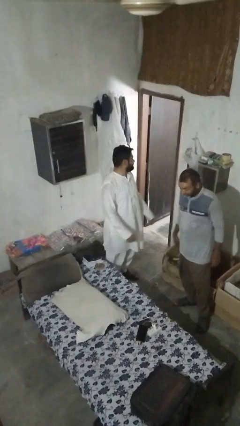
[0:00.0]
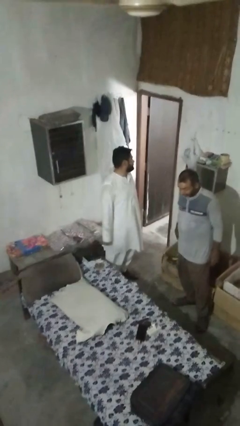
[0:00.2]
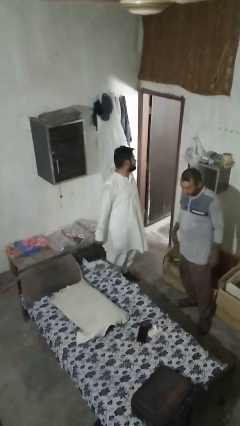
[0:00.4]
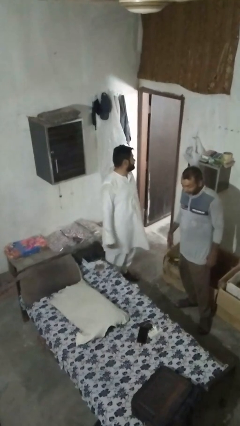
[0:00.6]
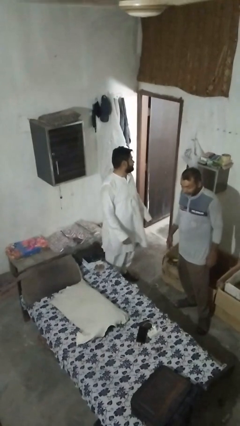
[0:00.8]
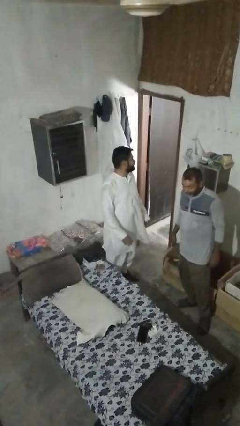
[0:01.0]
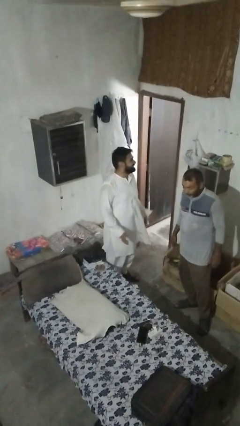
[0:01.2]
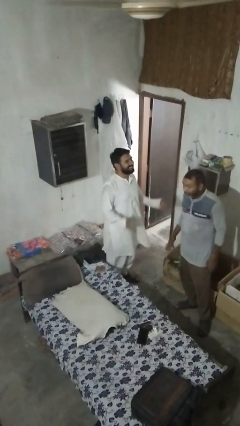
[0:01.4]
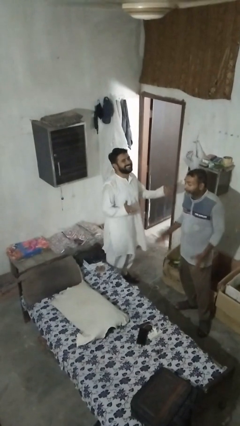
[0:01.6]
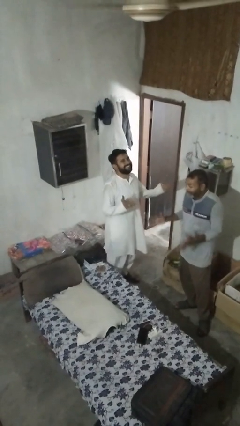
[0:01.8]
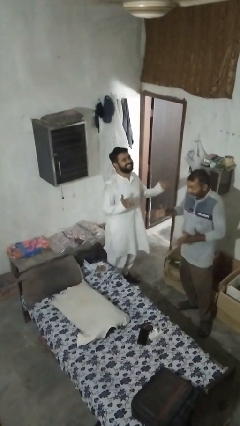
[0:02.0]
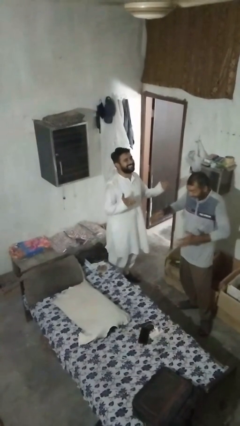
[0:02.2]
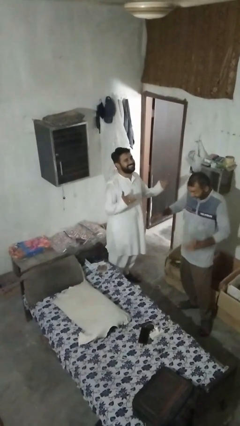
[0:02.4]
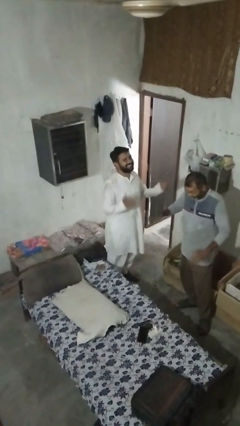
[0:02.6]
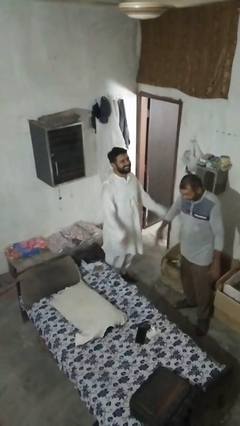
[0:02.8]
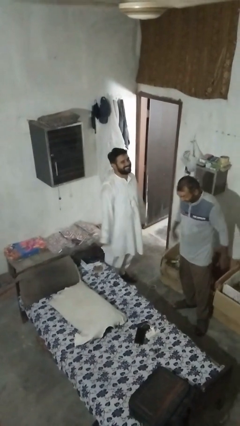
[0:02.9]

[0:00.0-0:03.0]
person laughs with person

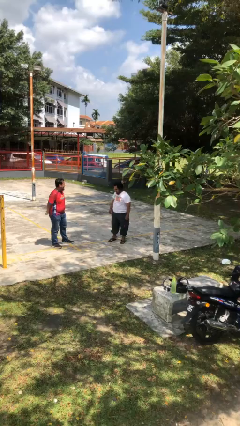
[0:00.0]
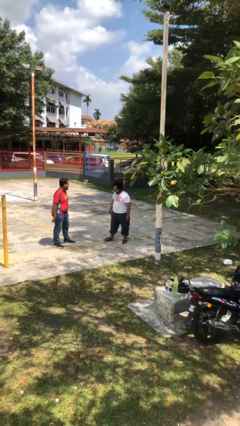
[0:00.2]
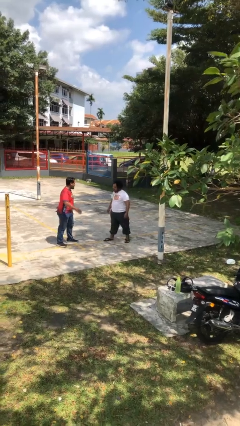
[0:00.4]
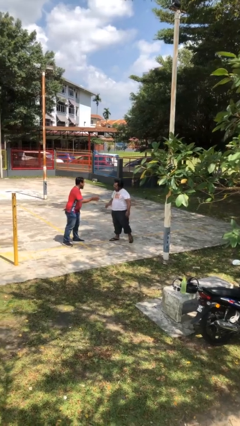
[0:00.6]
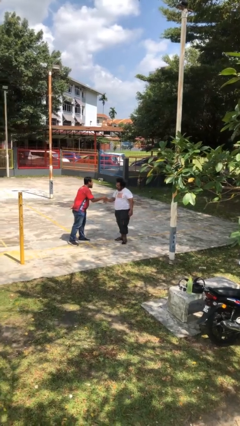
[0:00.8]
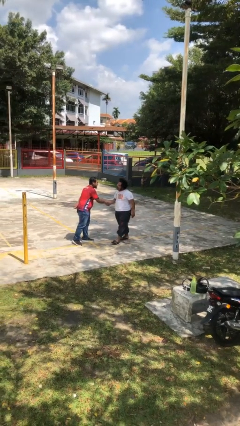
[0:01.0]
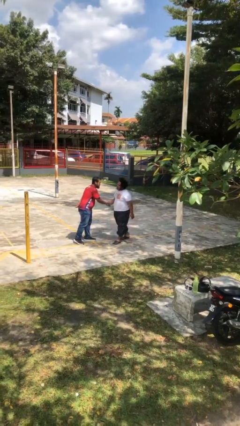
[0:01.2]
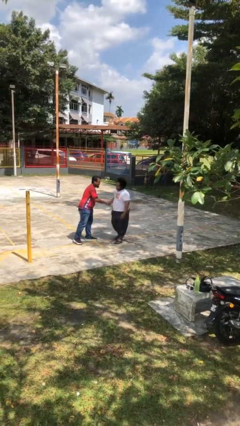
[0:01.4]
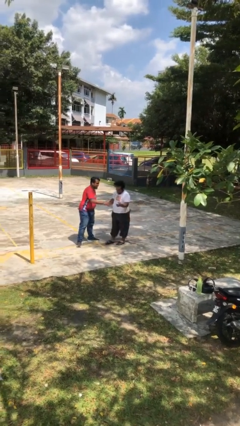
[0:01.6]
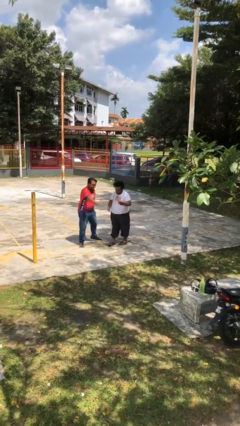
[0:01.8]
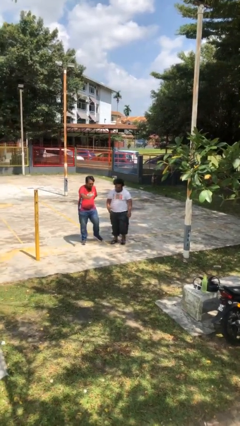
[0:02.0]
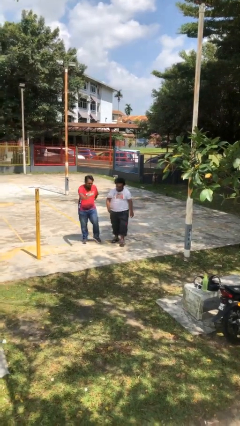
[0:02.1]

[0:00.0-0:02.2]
person shakes hand

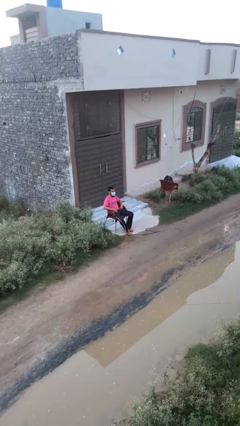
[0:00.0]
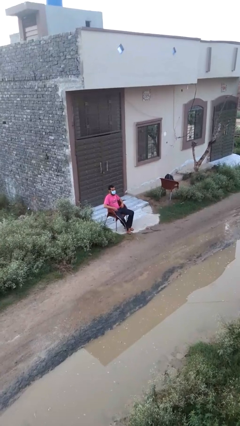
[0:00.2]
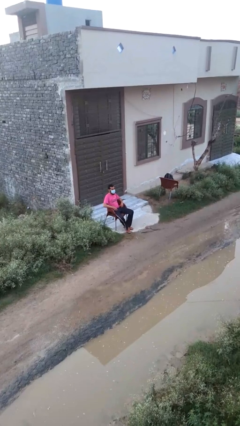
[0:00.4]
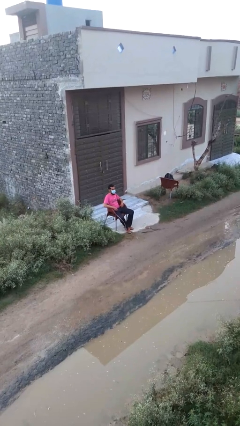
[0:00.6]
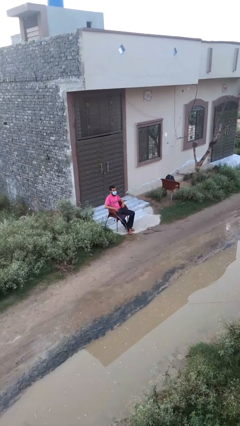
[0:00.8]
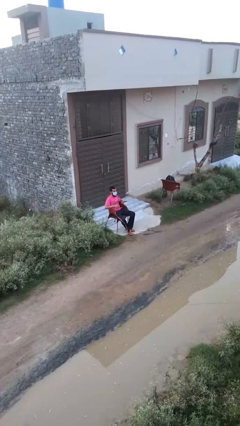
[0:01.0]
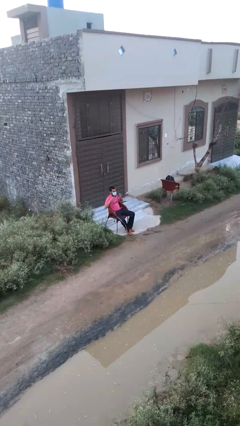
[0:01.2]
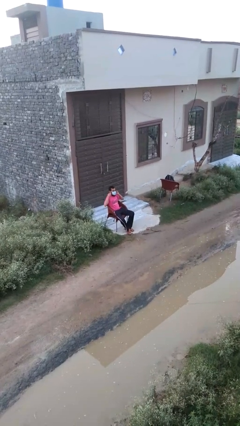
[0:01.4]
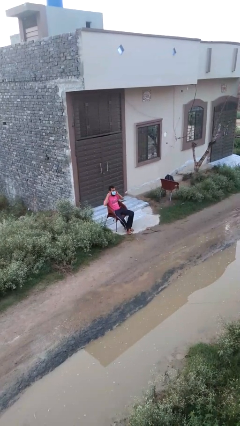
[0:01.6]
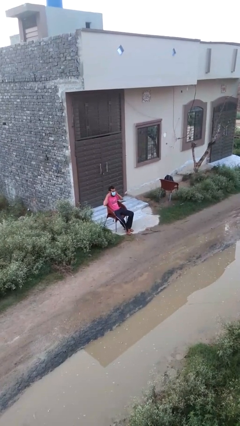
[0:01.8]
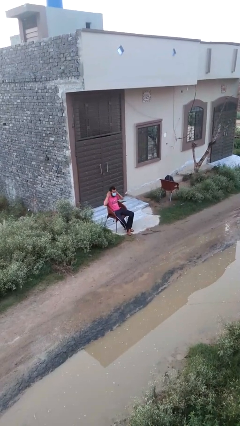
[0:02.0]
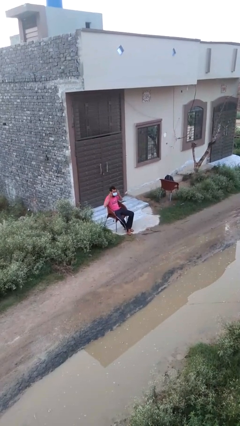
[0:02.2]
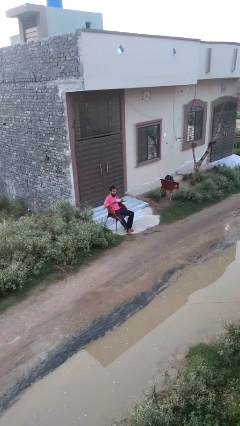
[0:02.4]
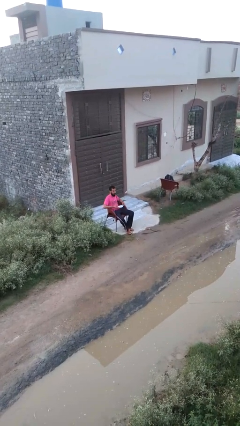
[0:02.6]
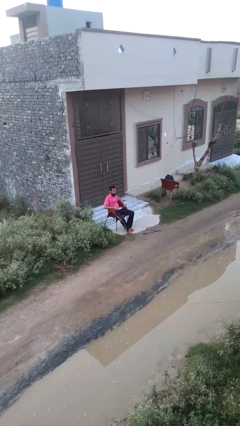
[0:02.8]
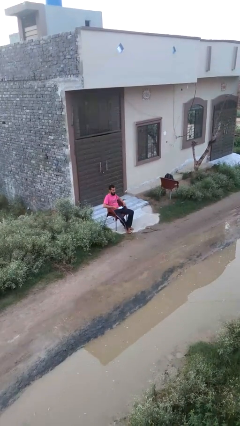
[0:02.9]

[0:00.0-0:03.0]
person takes off facemask

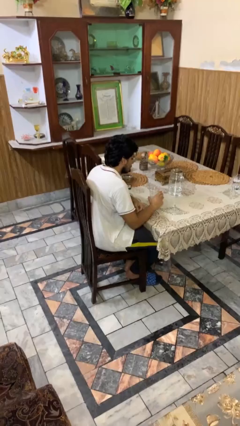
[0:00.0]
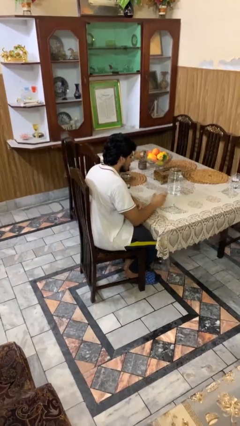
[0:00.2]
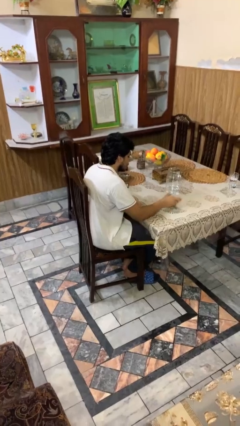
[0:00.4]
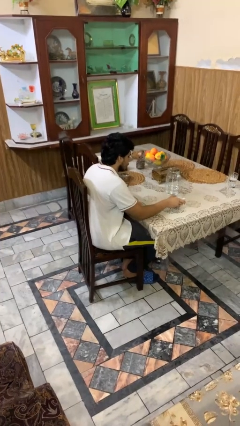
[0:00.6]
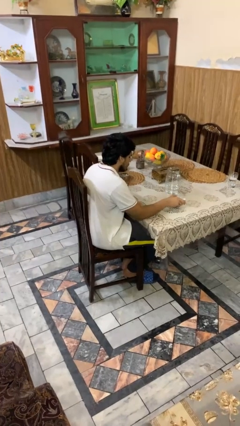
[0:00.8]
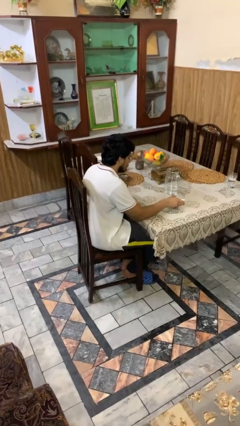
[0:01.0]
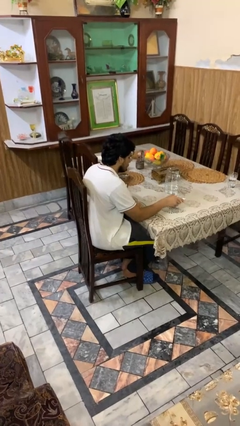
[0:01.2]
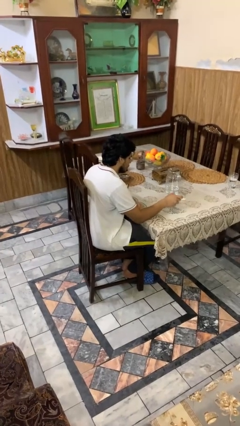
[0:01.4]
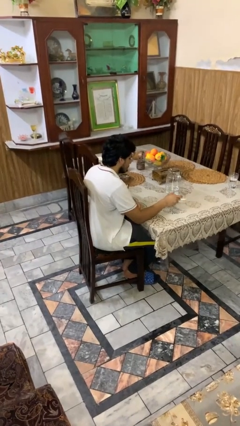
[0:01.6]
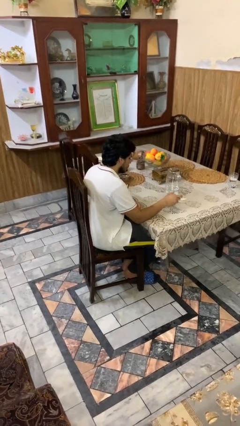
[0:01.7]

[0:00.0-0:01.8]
person knocks over glass

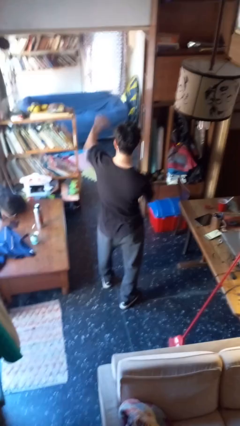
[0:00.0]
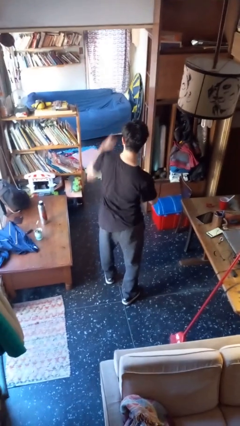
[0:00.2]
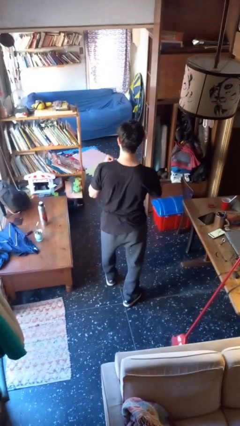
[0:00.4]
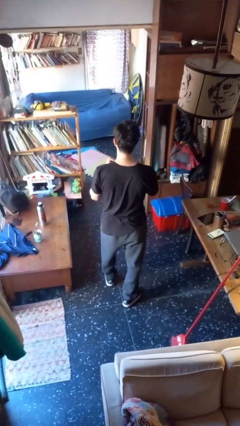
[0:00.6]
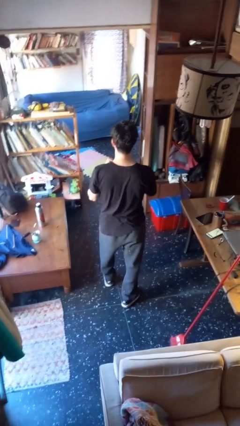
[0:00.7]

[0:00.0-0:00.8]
person punches

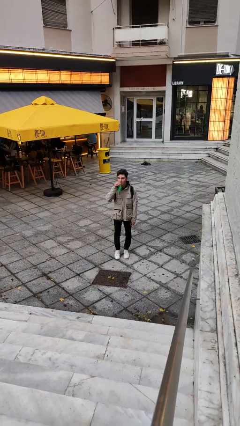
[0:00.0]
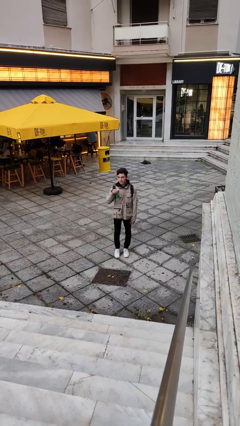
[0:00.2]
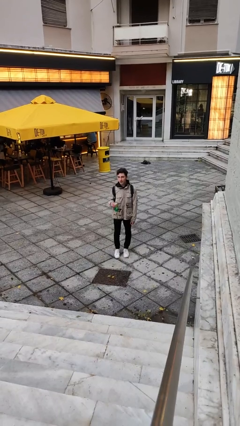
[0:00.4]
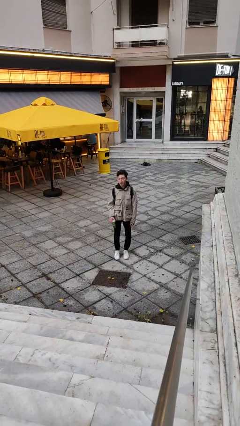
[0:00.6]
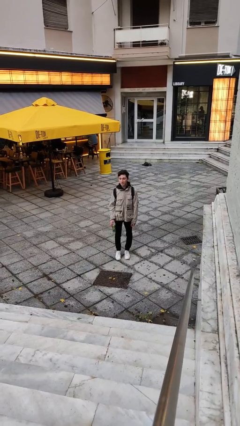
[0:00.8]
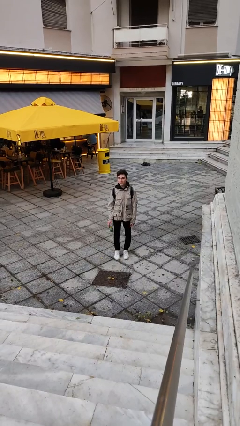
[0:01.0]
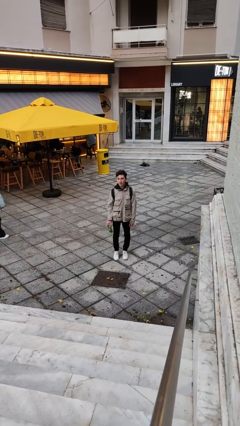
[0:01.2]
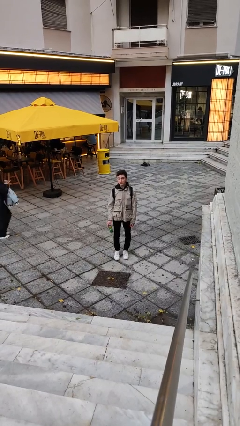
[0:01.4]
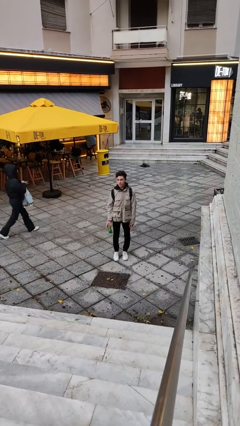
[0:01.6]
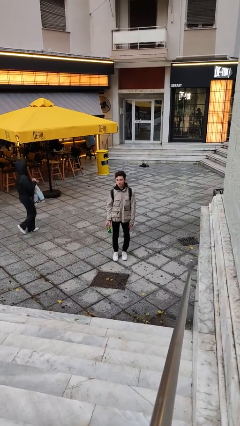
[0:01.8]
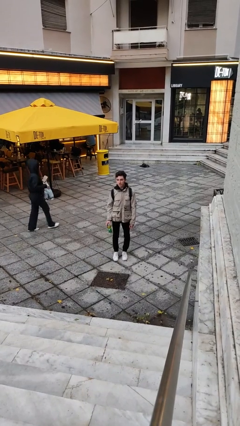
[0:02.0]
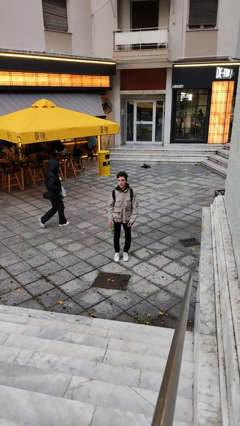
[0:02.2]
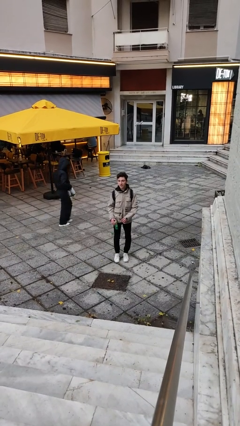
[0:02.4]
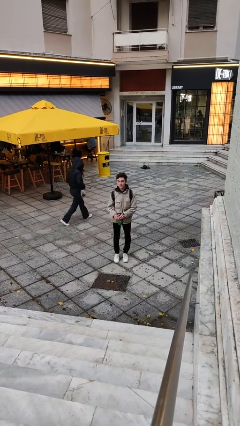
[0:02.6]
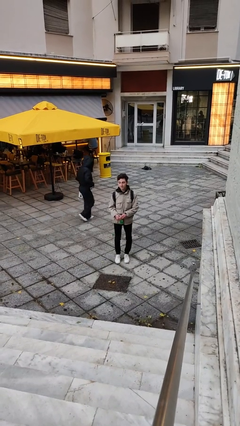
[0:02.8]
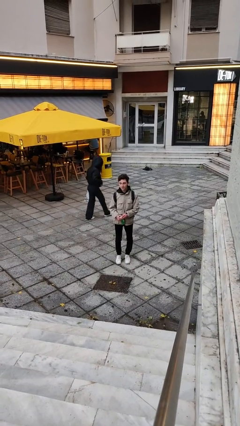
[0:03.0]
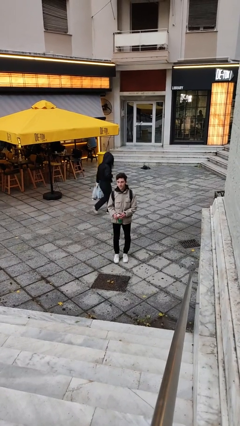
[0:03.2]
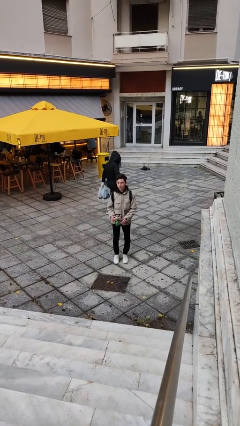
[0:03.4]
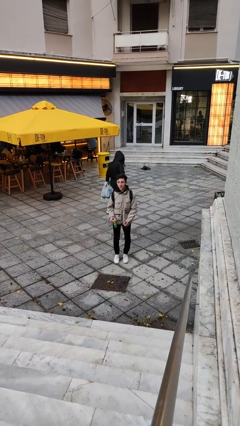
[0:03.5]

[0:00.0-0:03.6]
person drinks from beverage can

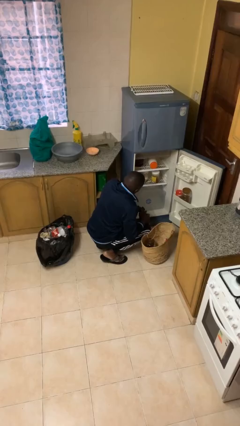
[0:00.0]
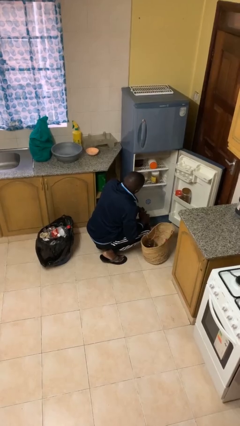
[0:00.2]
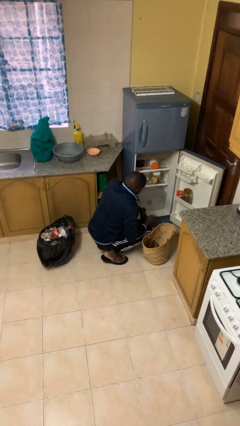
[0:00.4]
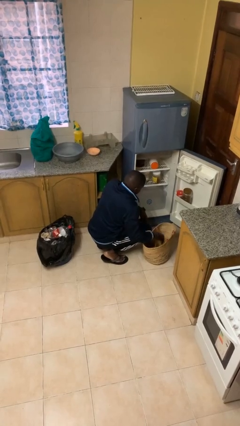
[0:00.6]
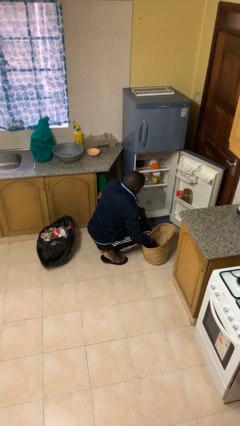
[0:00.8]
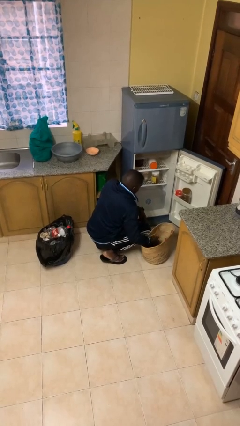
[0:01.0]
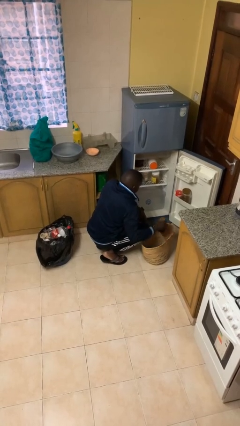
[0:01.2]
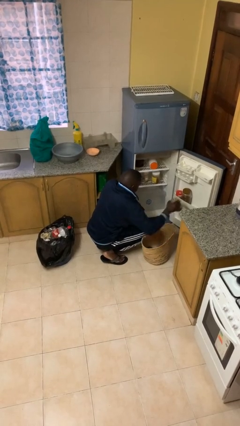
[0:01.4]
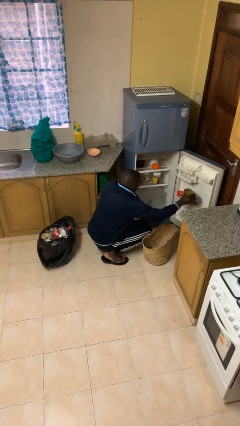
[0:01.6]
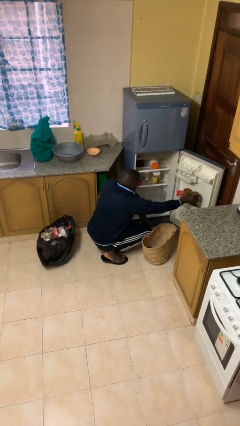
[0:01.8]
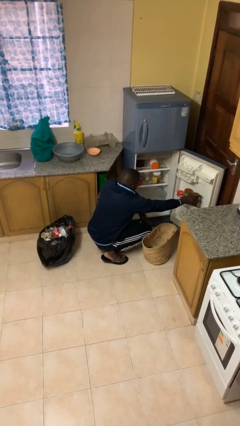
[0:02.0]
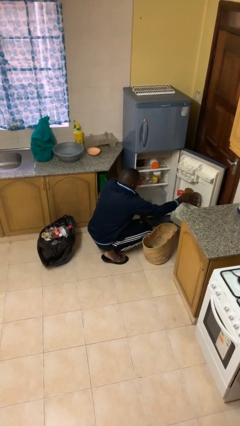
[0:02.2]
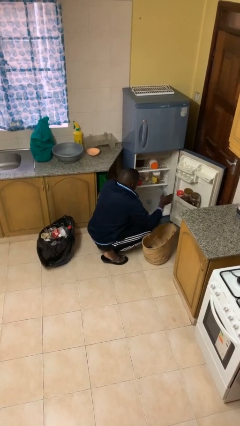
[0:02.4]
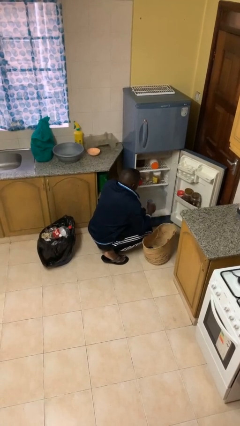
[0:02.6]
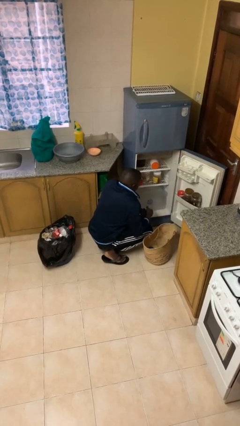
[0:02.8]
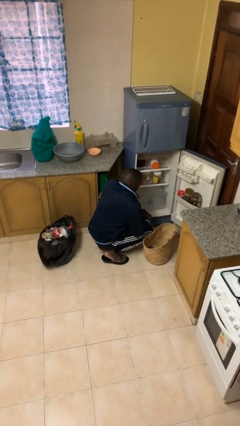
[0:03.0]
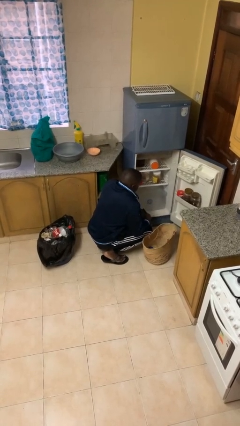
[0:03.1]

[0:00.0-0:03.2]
person loads groceries into refrigerator
